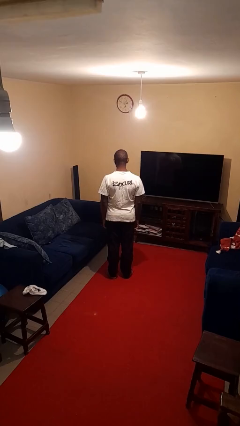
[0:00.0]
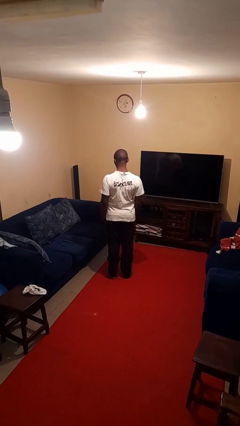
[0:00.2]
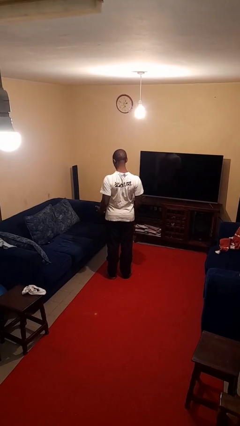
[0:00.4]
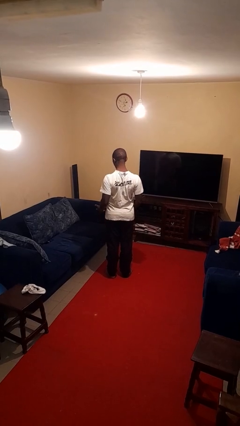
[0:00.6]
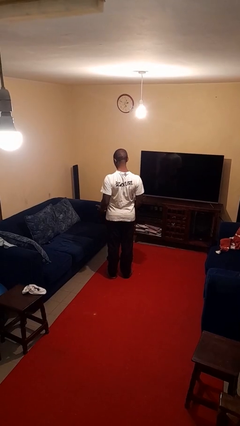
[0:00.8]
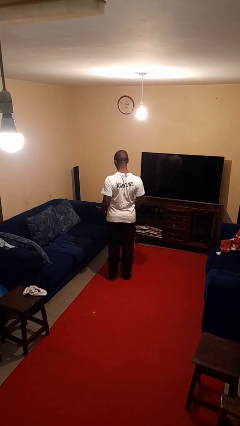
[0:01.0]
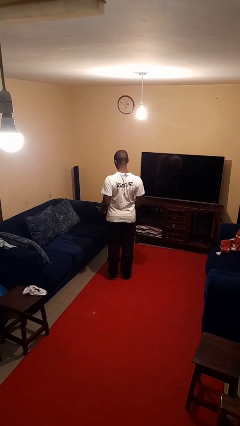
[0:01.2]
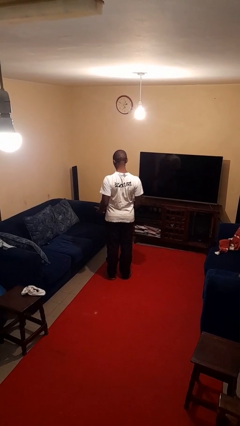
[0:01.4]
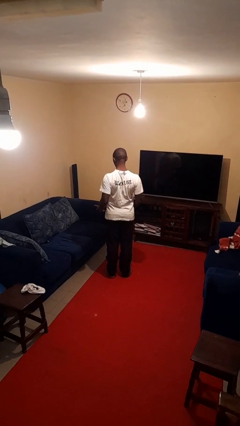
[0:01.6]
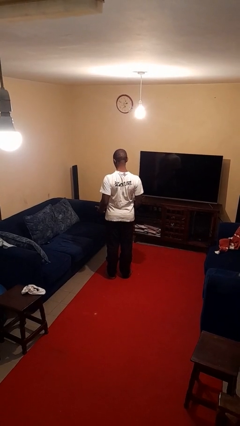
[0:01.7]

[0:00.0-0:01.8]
person shrugs

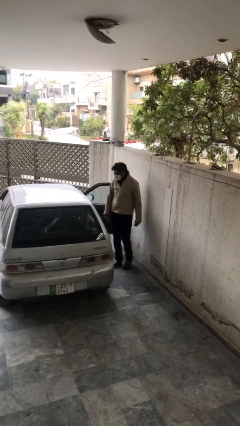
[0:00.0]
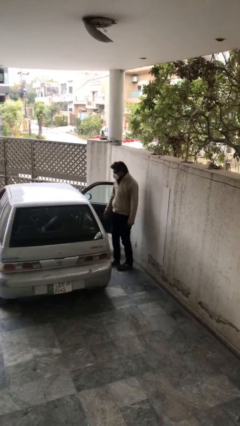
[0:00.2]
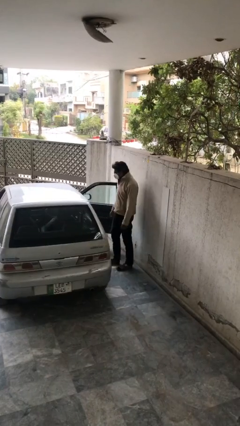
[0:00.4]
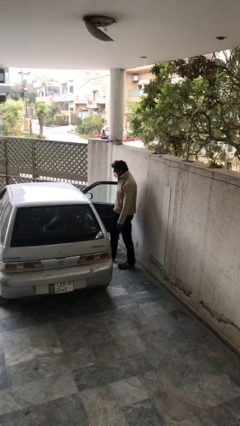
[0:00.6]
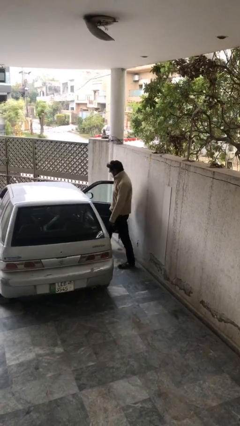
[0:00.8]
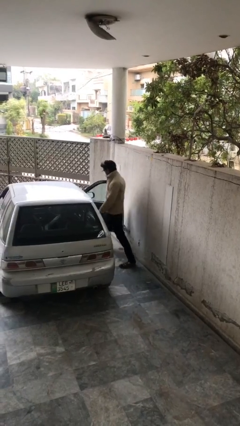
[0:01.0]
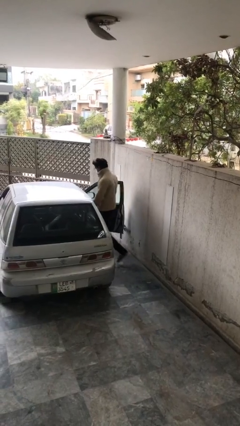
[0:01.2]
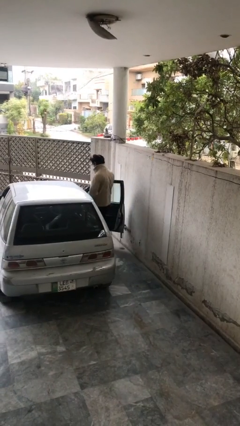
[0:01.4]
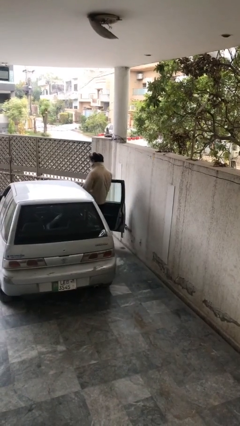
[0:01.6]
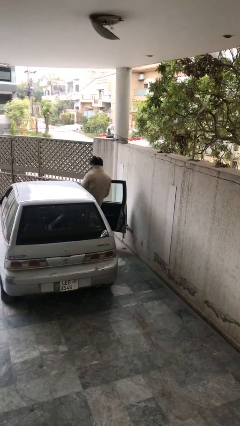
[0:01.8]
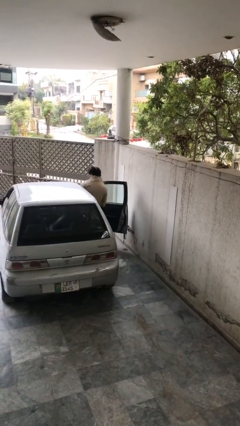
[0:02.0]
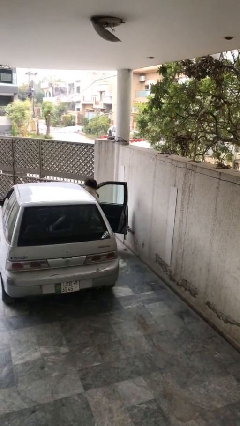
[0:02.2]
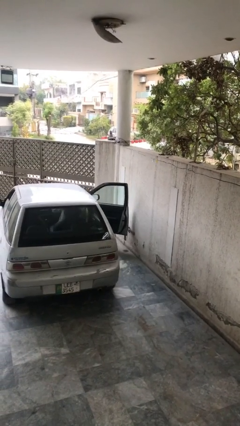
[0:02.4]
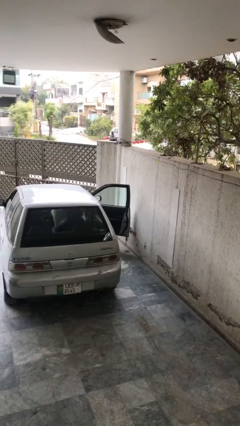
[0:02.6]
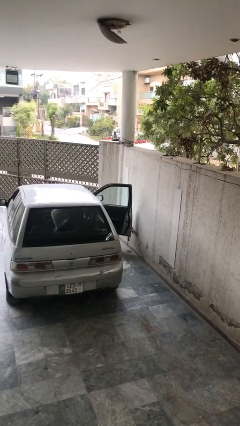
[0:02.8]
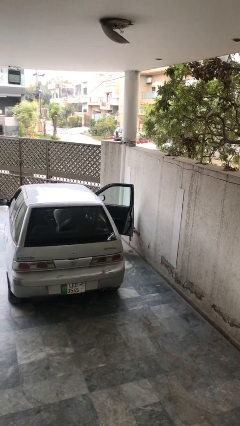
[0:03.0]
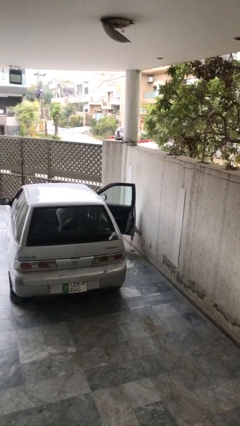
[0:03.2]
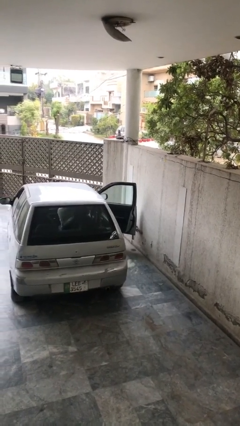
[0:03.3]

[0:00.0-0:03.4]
person enters car

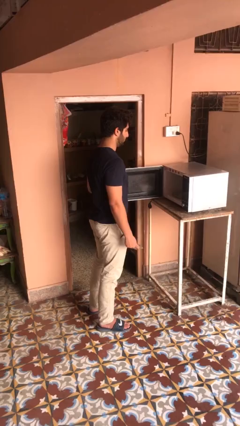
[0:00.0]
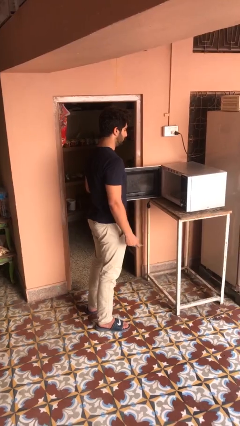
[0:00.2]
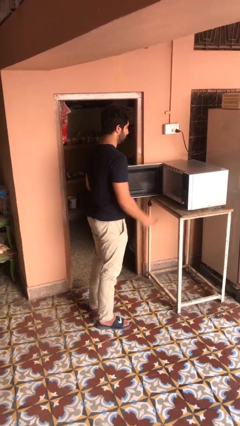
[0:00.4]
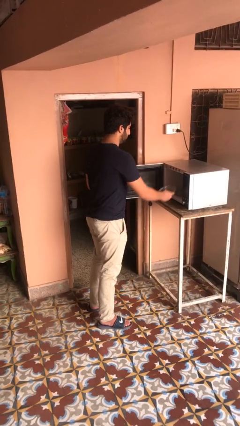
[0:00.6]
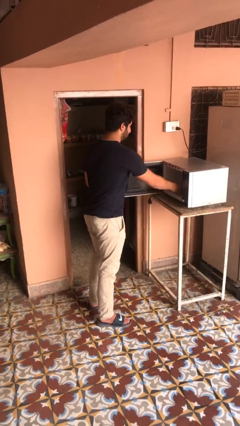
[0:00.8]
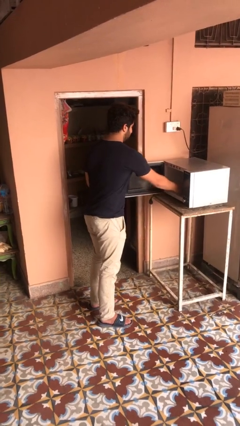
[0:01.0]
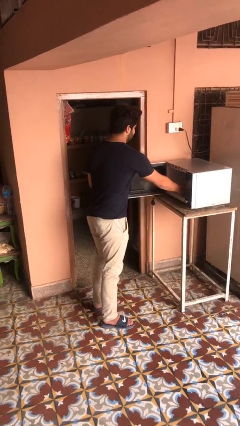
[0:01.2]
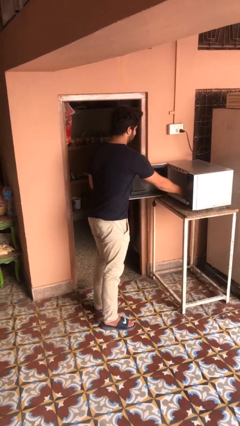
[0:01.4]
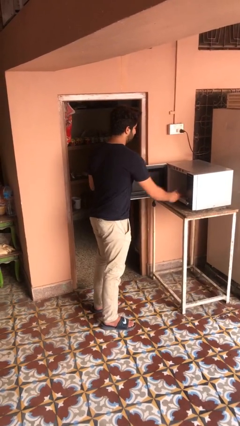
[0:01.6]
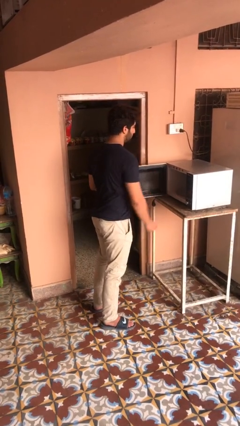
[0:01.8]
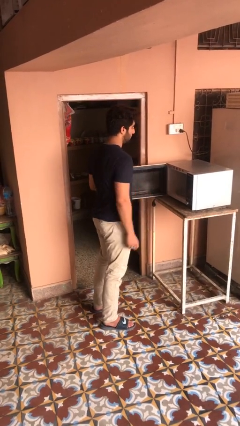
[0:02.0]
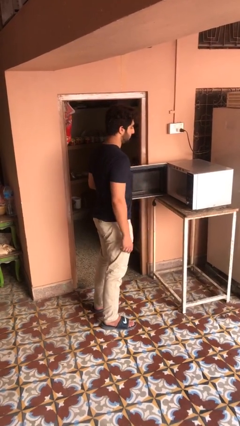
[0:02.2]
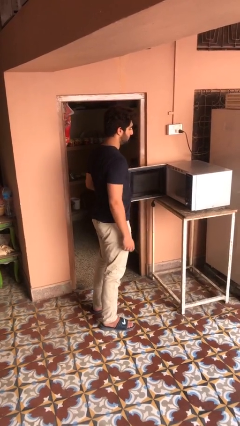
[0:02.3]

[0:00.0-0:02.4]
person puts object into microwave

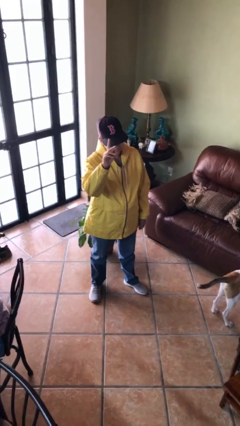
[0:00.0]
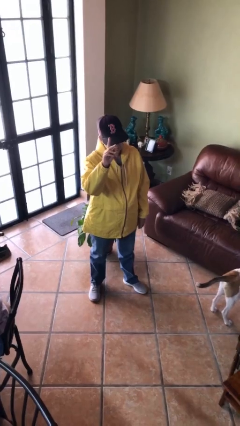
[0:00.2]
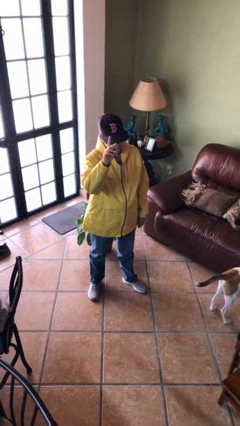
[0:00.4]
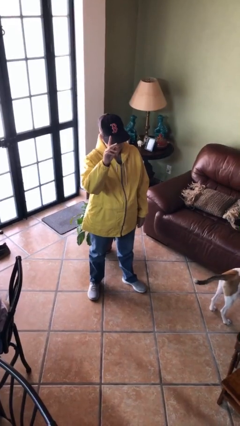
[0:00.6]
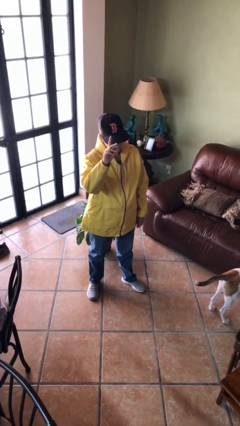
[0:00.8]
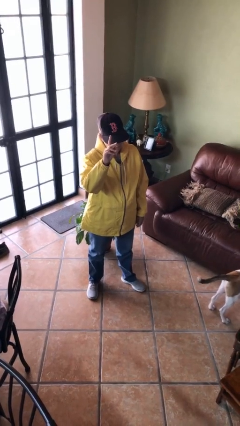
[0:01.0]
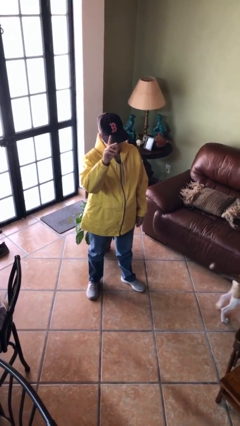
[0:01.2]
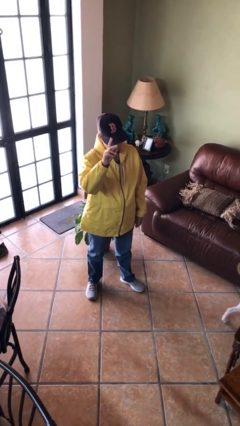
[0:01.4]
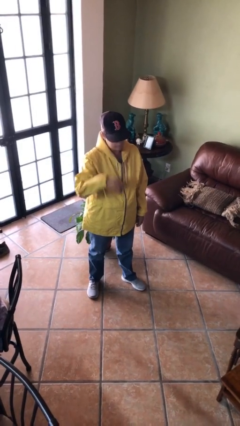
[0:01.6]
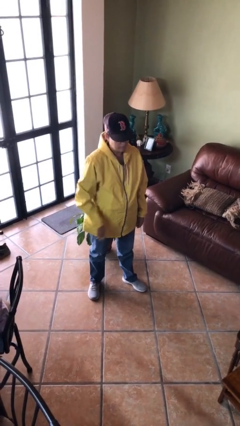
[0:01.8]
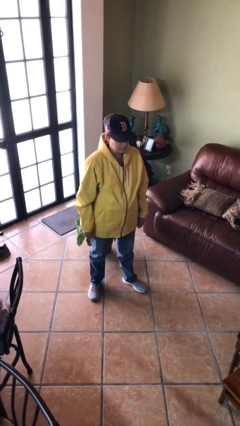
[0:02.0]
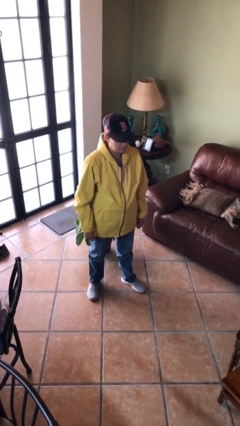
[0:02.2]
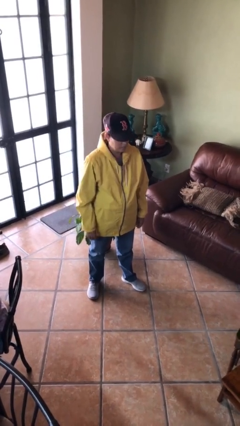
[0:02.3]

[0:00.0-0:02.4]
person gestures lower hand

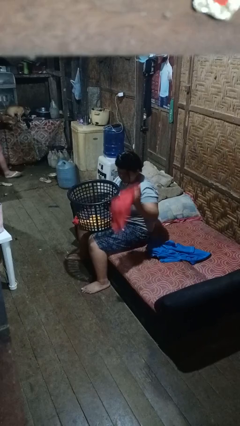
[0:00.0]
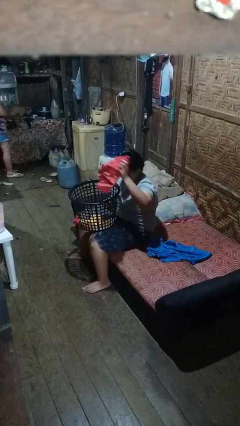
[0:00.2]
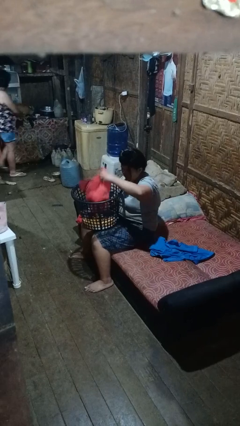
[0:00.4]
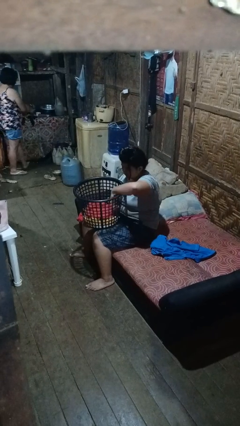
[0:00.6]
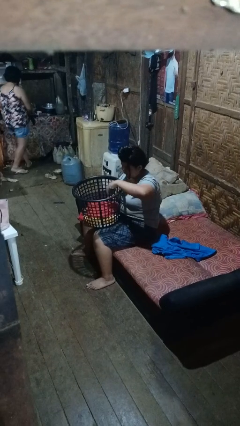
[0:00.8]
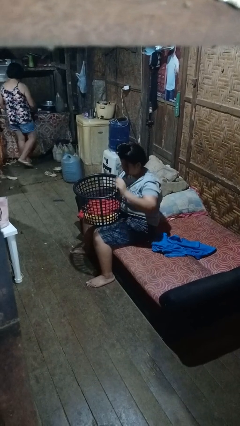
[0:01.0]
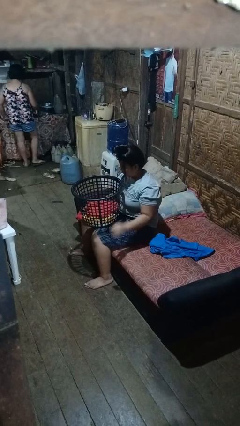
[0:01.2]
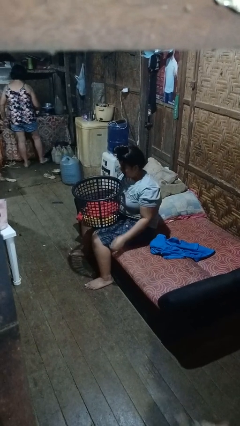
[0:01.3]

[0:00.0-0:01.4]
person puts object into basket

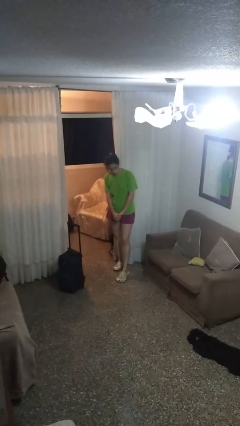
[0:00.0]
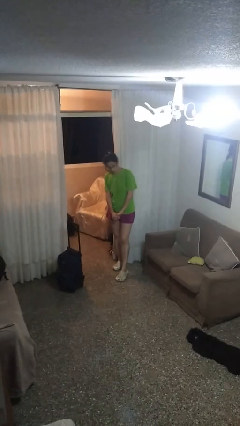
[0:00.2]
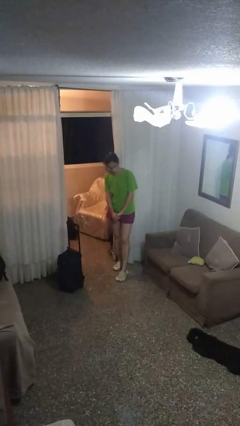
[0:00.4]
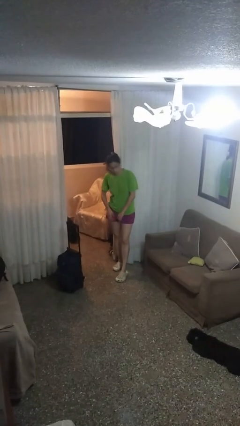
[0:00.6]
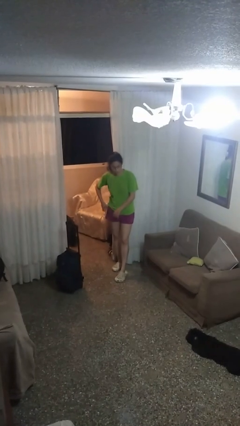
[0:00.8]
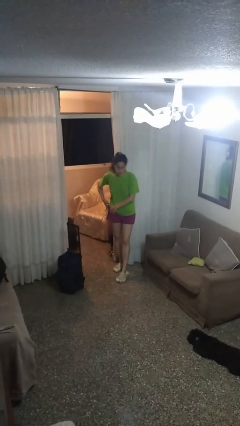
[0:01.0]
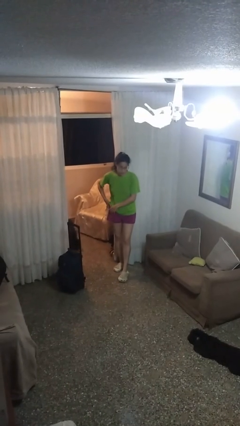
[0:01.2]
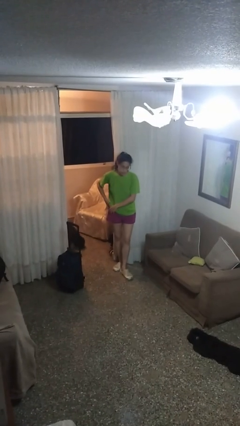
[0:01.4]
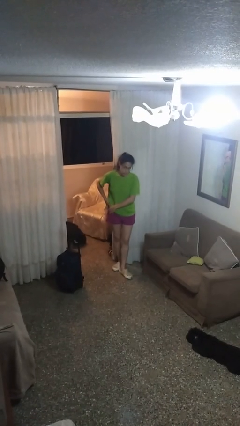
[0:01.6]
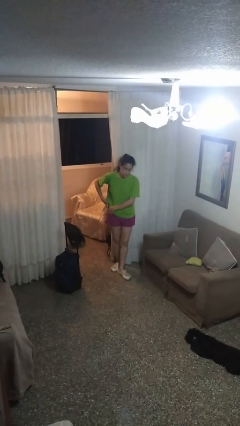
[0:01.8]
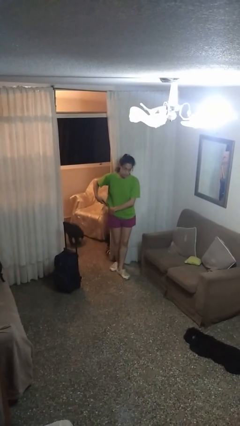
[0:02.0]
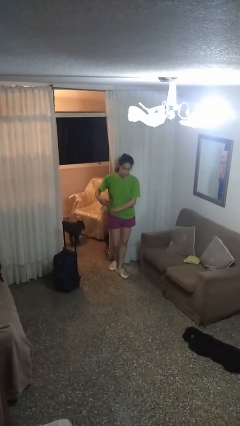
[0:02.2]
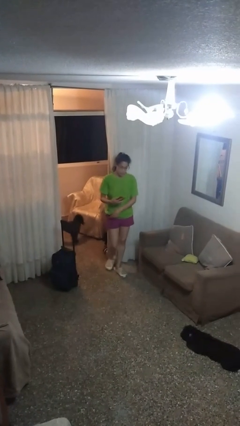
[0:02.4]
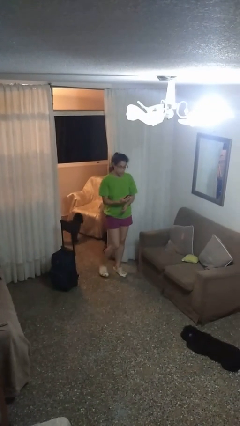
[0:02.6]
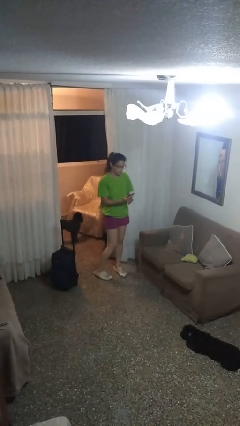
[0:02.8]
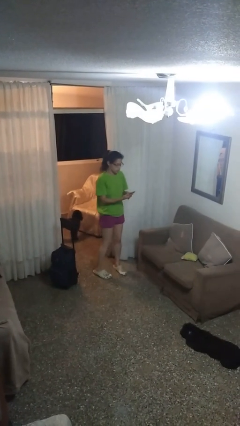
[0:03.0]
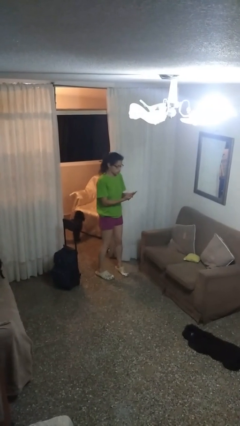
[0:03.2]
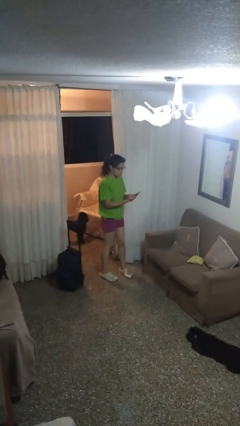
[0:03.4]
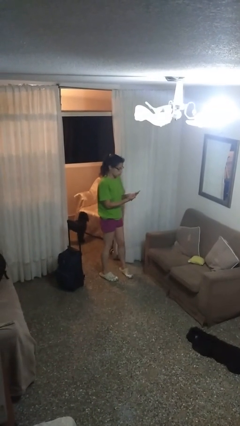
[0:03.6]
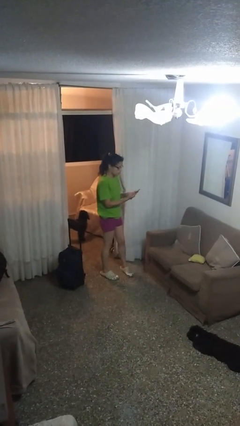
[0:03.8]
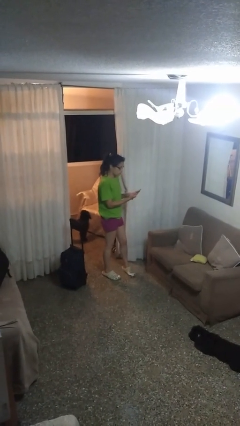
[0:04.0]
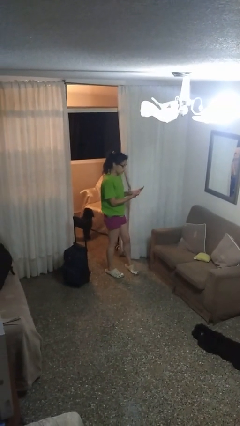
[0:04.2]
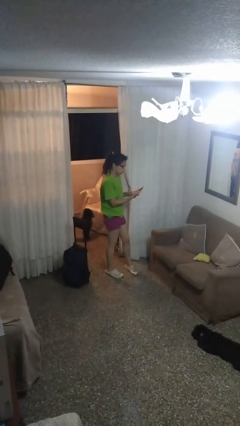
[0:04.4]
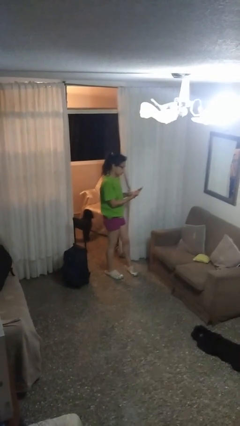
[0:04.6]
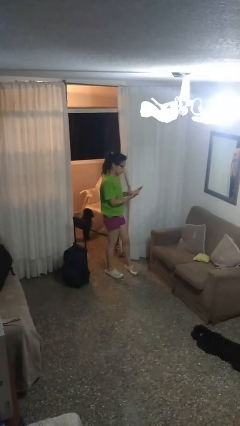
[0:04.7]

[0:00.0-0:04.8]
person takes phone from pocket

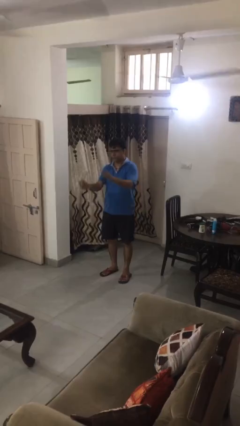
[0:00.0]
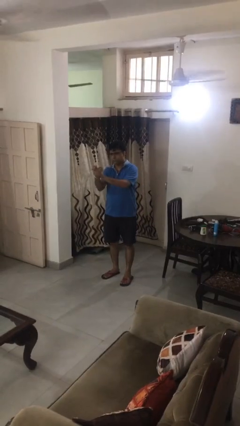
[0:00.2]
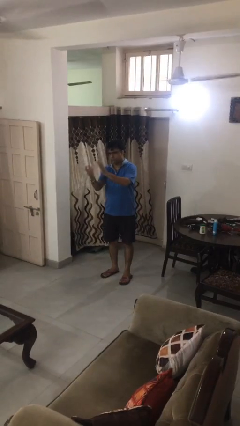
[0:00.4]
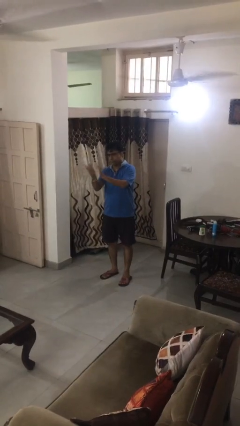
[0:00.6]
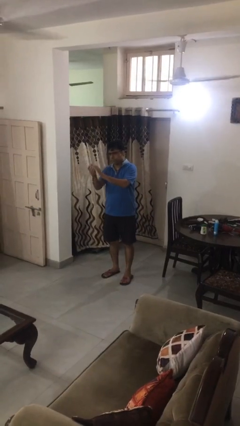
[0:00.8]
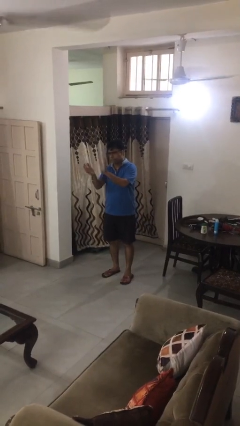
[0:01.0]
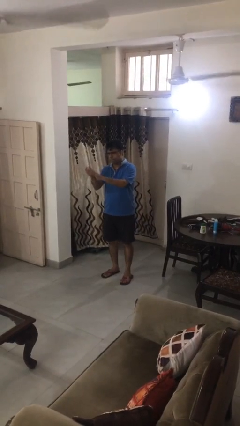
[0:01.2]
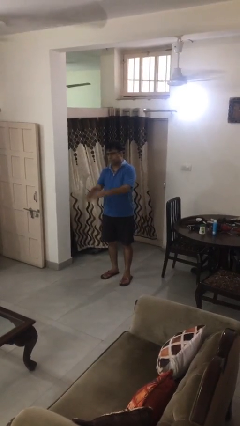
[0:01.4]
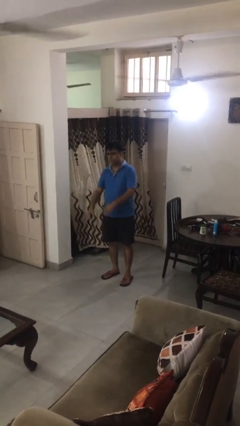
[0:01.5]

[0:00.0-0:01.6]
person claps hands
